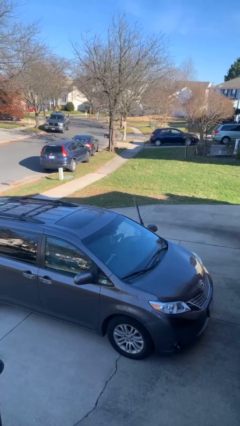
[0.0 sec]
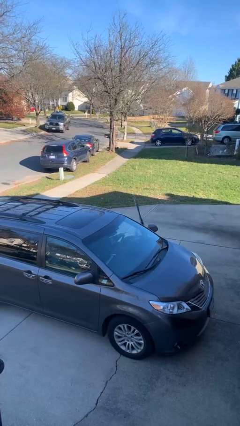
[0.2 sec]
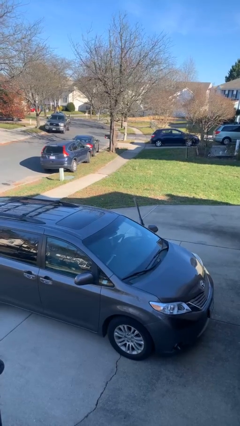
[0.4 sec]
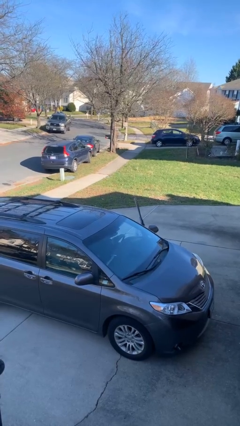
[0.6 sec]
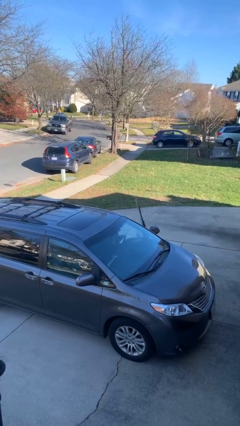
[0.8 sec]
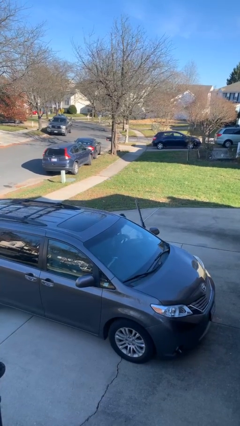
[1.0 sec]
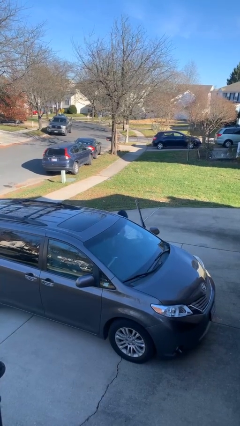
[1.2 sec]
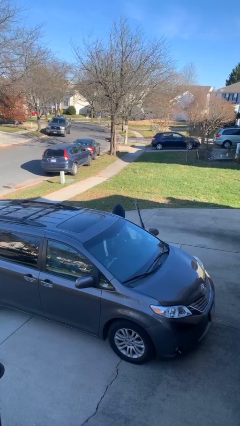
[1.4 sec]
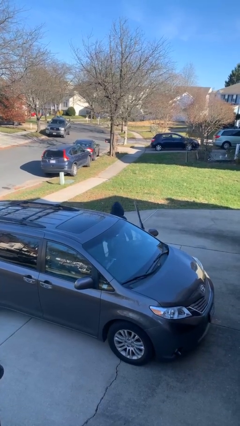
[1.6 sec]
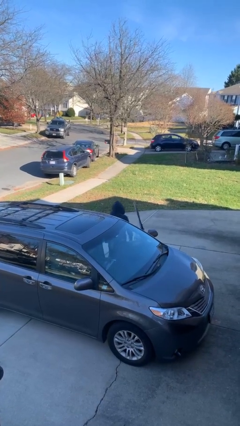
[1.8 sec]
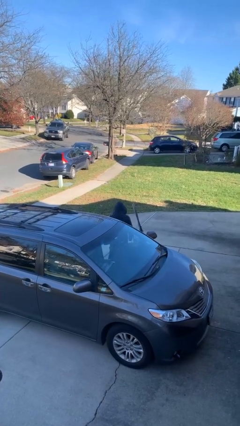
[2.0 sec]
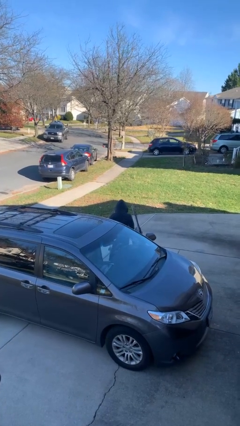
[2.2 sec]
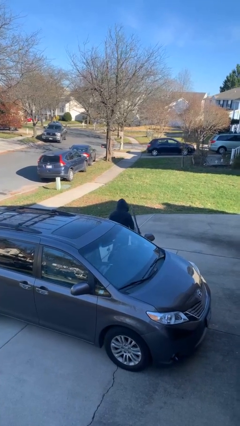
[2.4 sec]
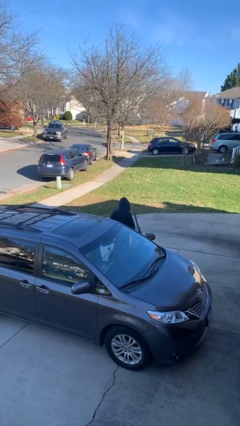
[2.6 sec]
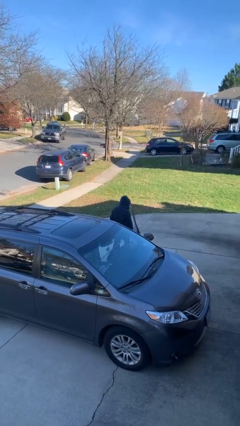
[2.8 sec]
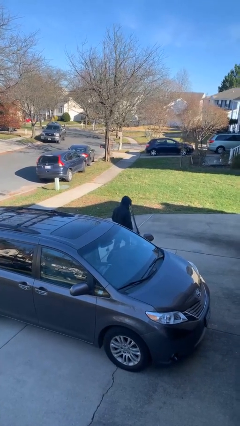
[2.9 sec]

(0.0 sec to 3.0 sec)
person exits car

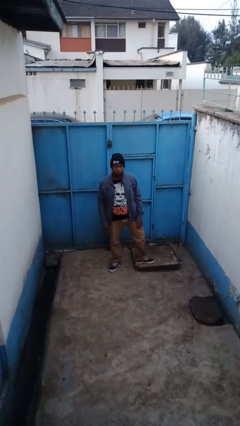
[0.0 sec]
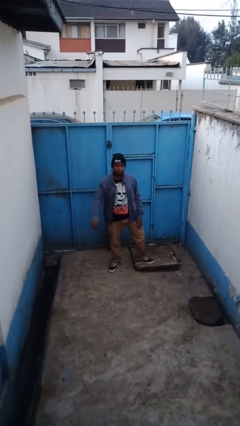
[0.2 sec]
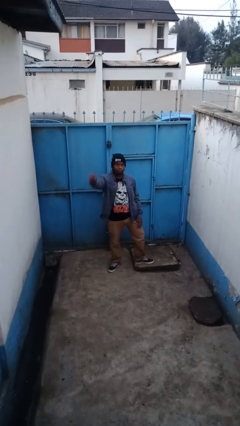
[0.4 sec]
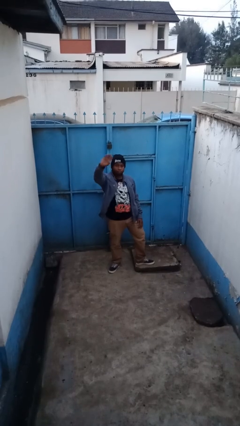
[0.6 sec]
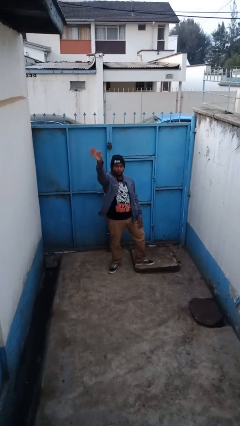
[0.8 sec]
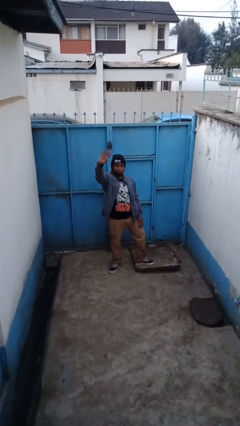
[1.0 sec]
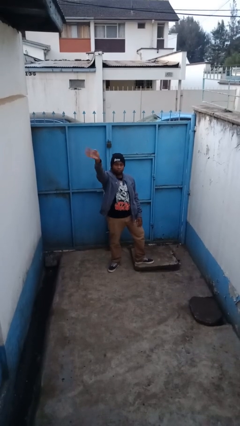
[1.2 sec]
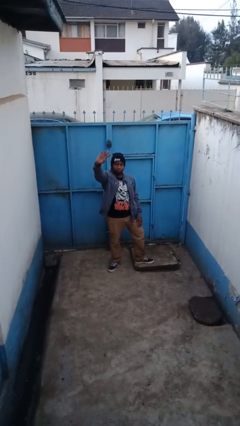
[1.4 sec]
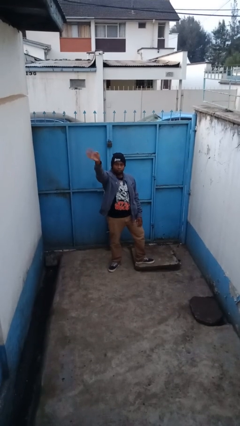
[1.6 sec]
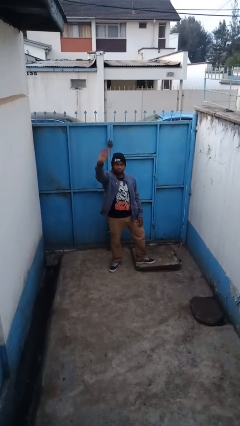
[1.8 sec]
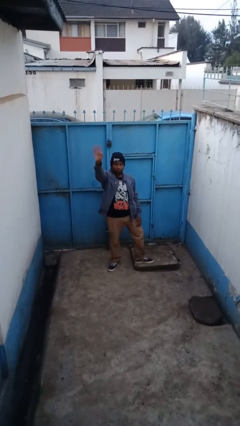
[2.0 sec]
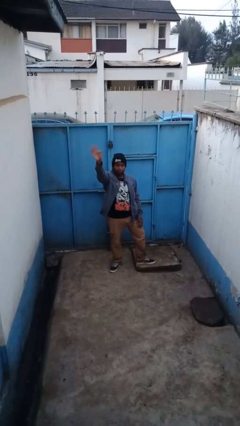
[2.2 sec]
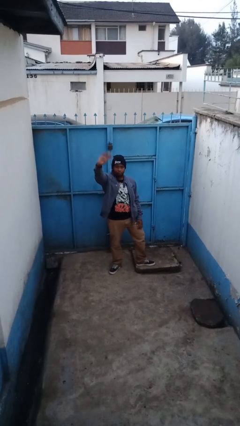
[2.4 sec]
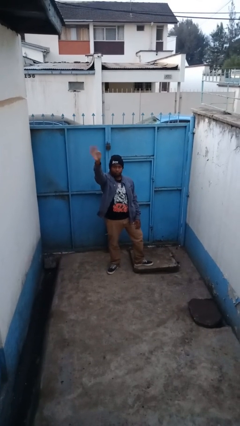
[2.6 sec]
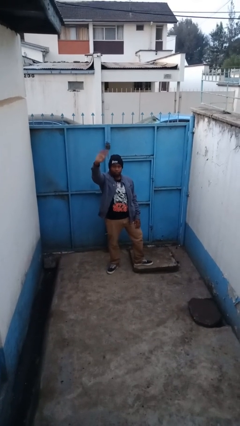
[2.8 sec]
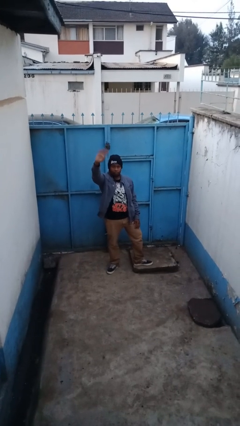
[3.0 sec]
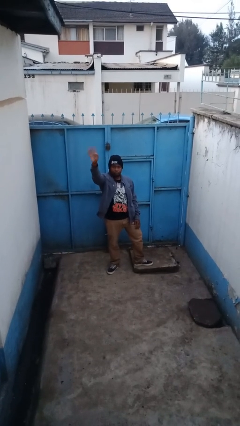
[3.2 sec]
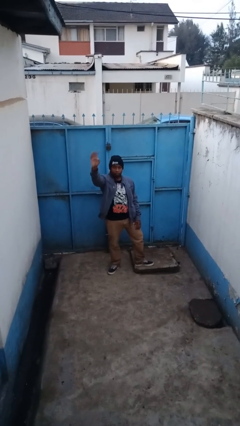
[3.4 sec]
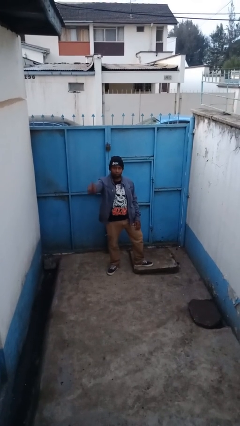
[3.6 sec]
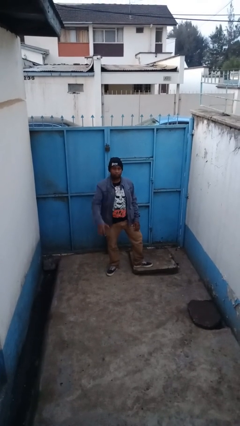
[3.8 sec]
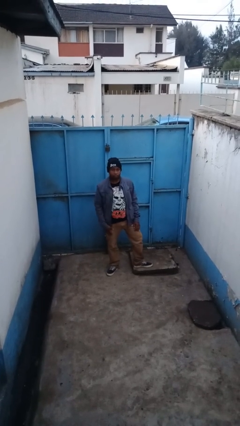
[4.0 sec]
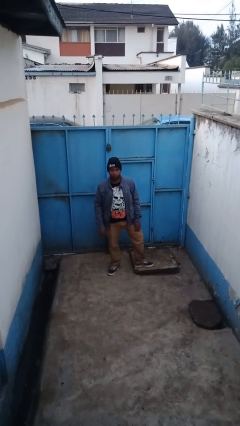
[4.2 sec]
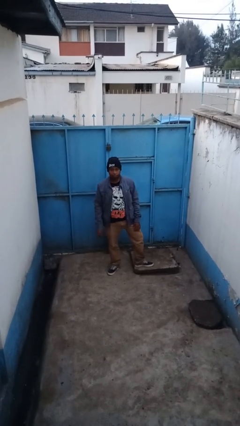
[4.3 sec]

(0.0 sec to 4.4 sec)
person waves at person

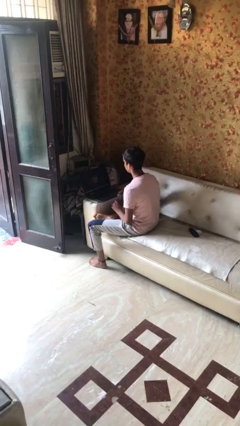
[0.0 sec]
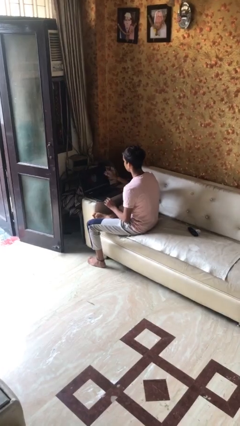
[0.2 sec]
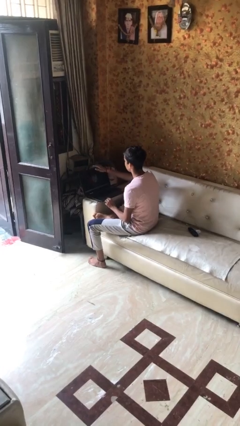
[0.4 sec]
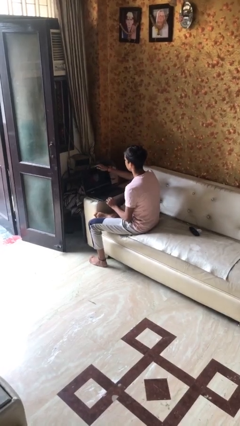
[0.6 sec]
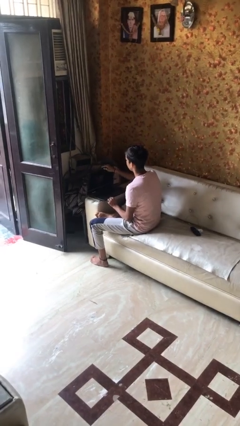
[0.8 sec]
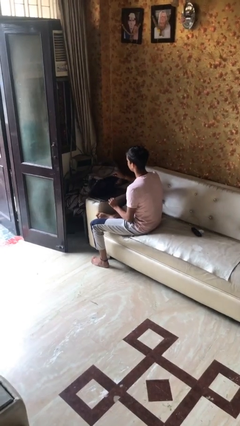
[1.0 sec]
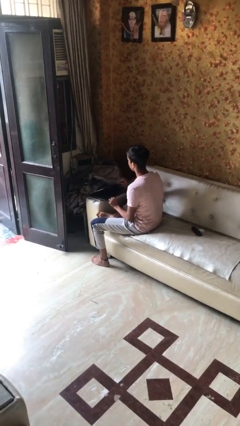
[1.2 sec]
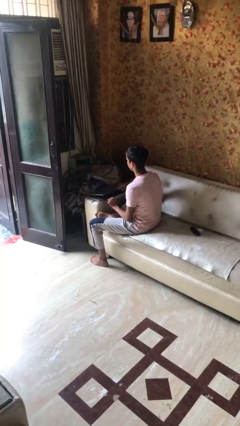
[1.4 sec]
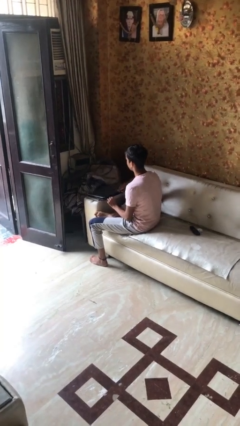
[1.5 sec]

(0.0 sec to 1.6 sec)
person closes laptop

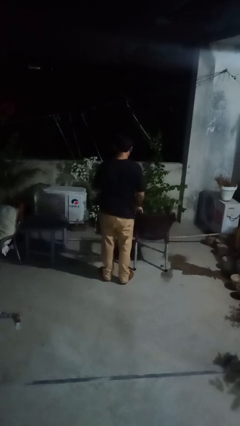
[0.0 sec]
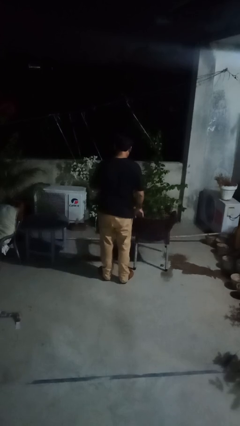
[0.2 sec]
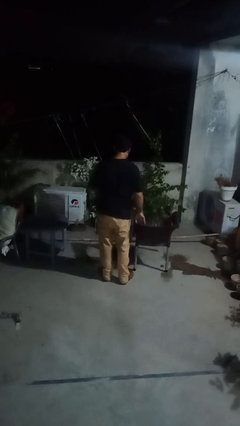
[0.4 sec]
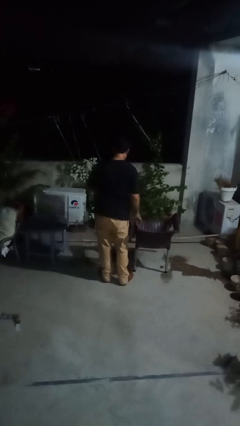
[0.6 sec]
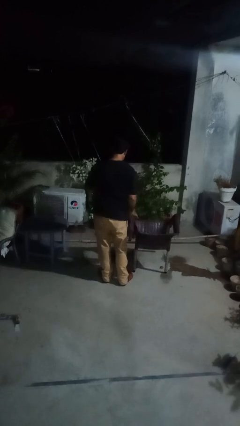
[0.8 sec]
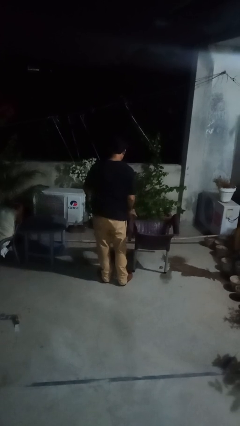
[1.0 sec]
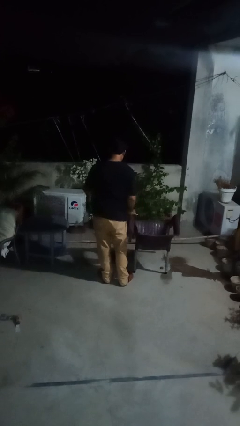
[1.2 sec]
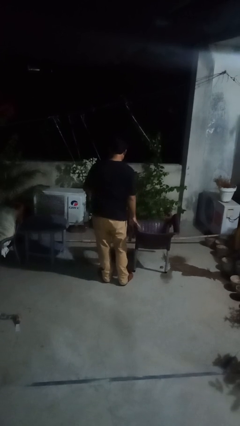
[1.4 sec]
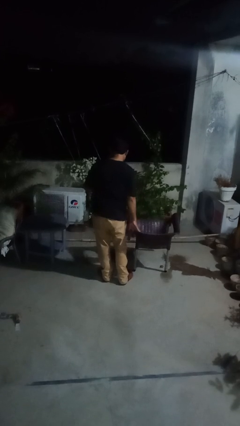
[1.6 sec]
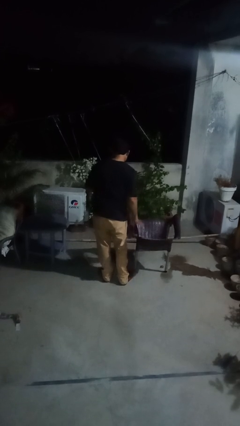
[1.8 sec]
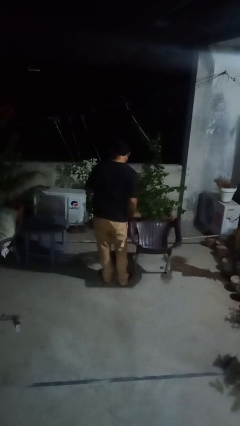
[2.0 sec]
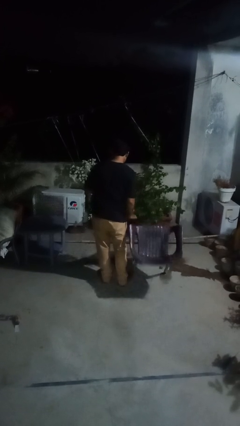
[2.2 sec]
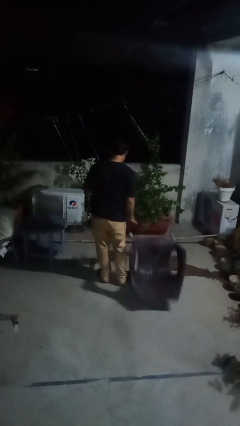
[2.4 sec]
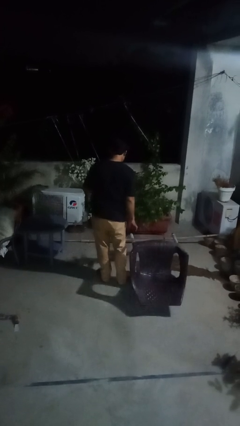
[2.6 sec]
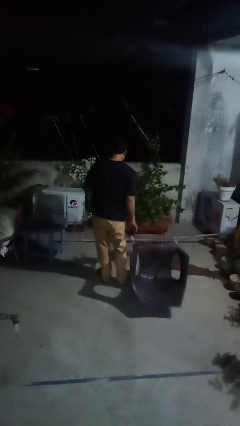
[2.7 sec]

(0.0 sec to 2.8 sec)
person knocks over furniture

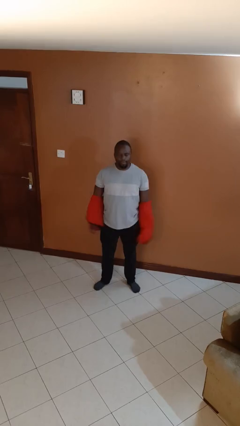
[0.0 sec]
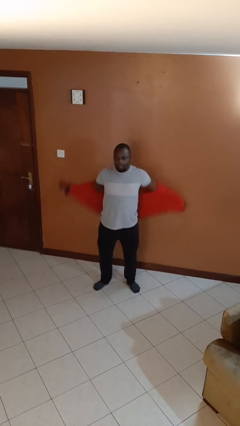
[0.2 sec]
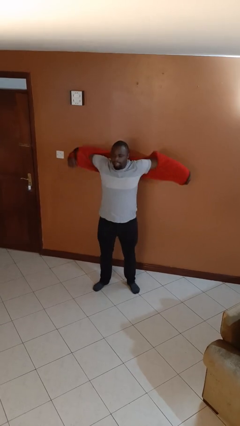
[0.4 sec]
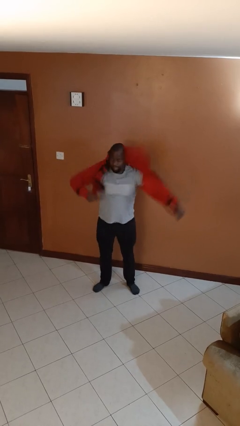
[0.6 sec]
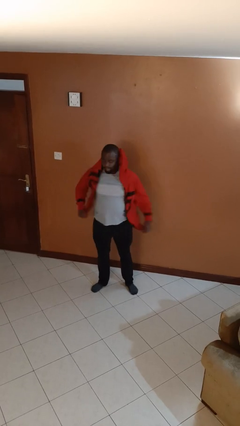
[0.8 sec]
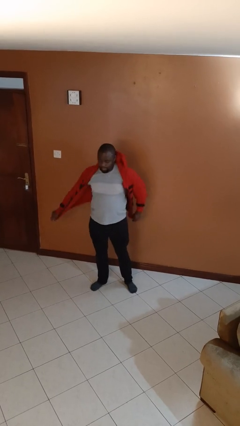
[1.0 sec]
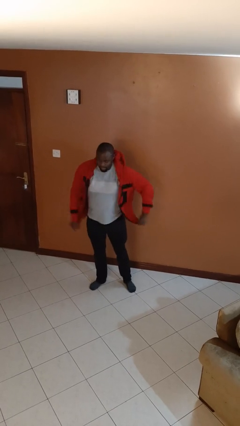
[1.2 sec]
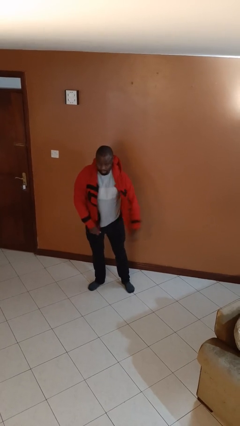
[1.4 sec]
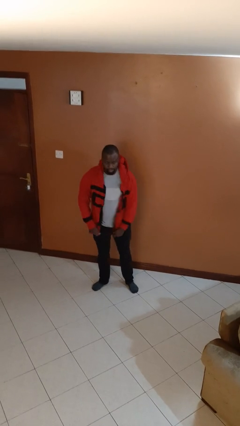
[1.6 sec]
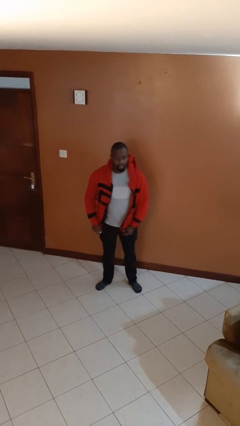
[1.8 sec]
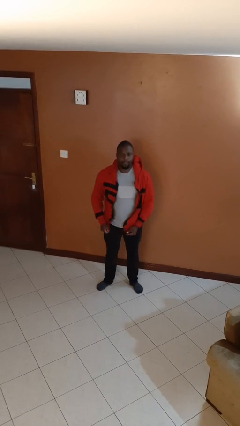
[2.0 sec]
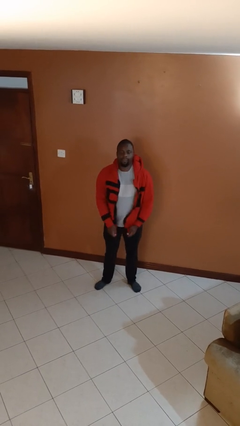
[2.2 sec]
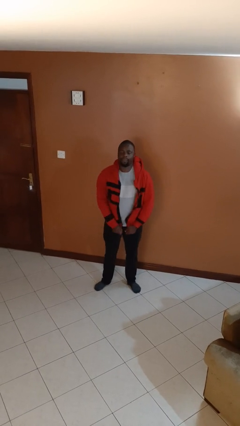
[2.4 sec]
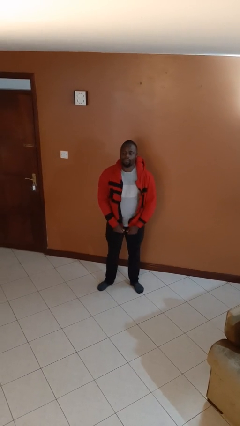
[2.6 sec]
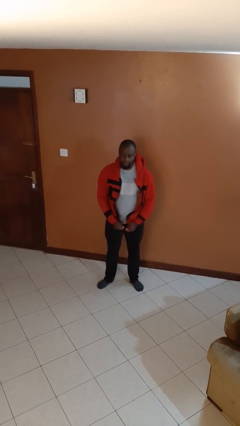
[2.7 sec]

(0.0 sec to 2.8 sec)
person puts on jacket

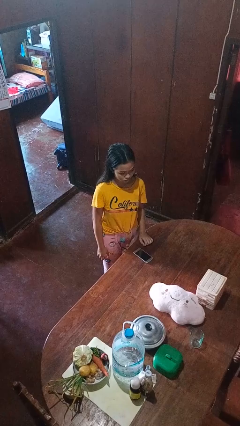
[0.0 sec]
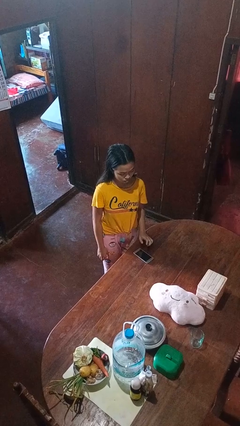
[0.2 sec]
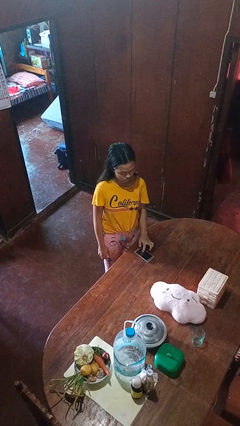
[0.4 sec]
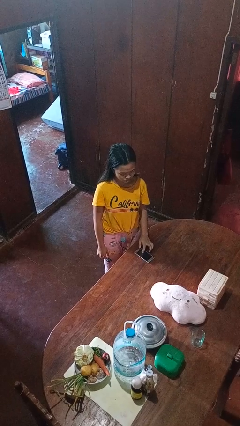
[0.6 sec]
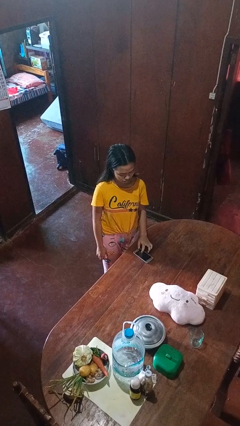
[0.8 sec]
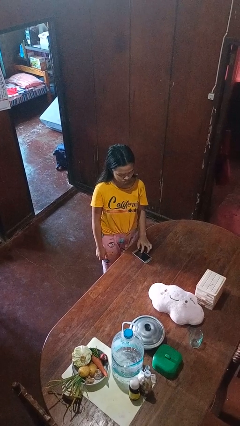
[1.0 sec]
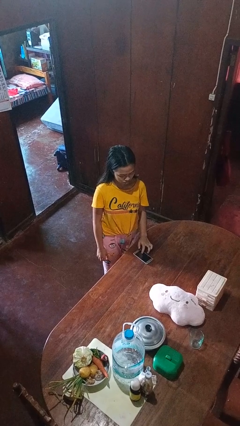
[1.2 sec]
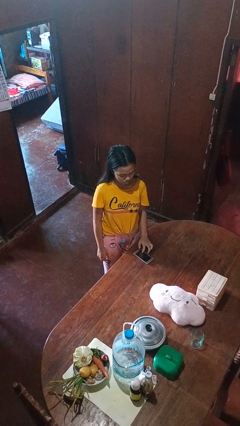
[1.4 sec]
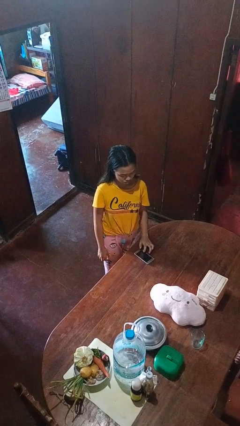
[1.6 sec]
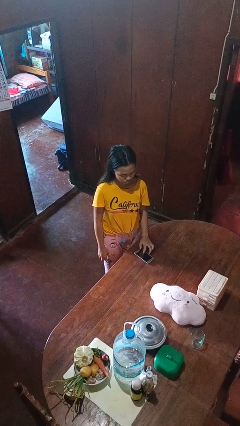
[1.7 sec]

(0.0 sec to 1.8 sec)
person taps object with finger

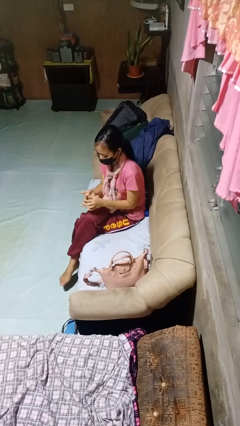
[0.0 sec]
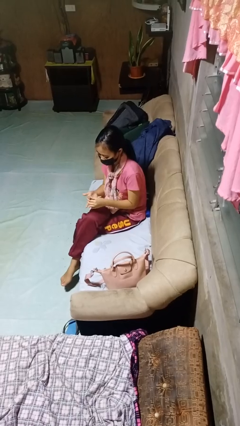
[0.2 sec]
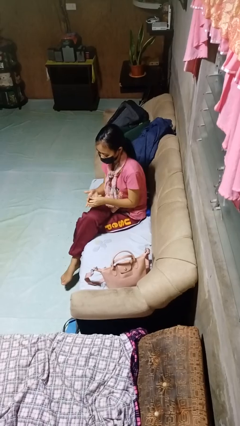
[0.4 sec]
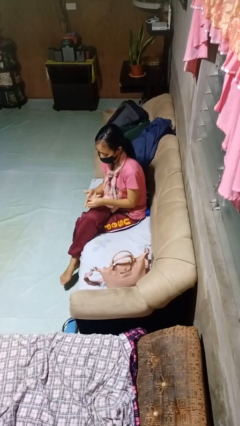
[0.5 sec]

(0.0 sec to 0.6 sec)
person takes off ring

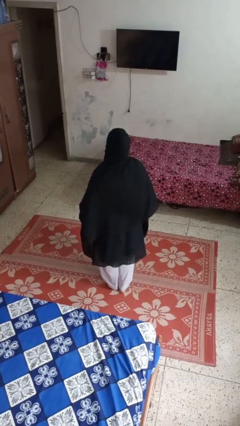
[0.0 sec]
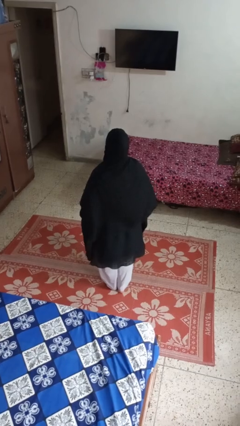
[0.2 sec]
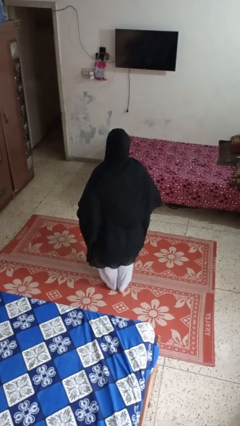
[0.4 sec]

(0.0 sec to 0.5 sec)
person walks tiptoe
